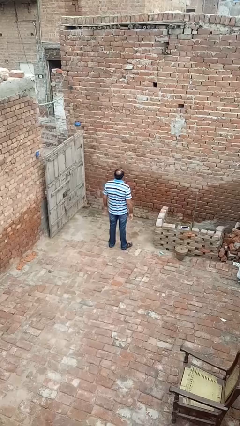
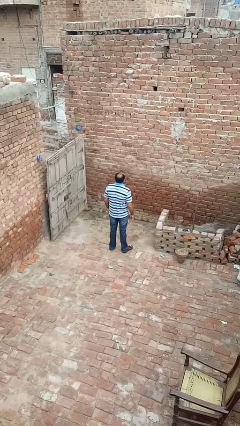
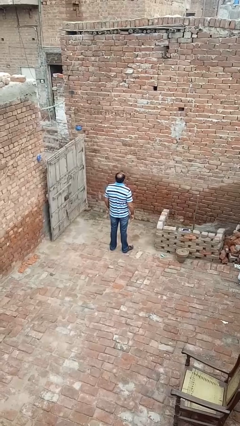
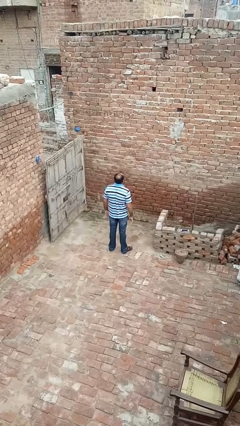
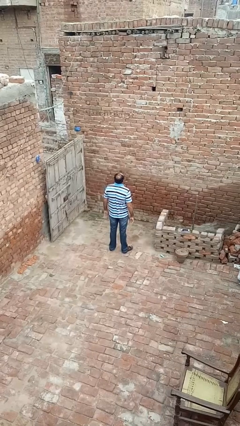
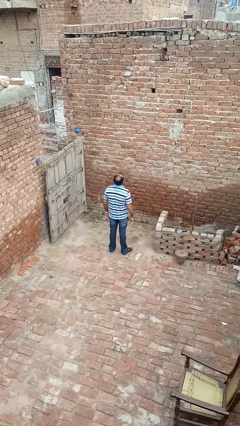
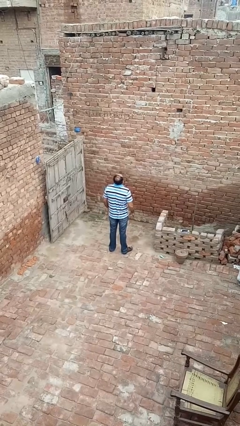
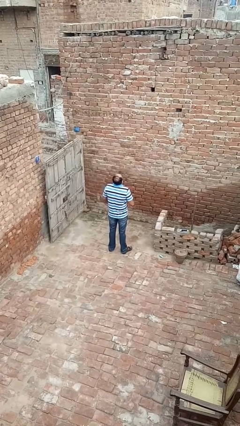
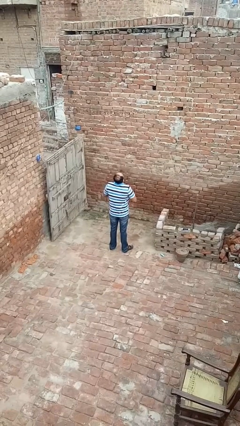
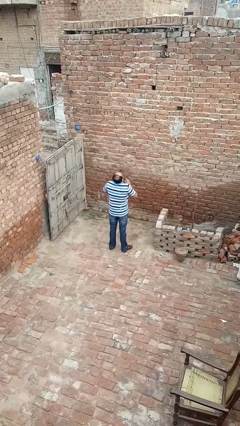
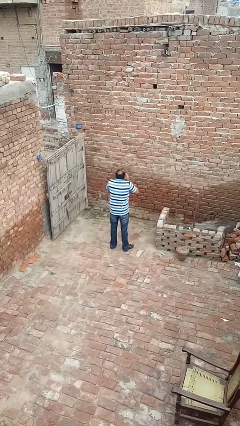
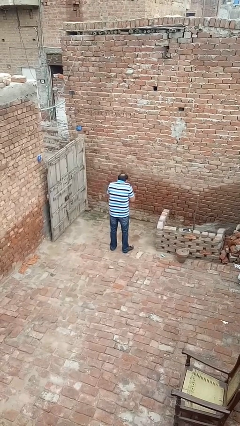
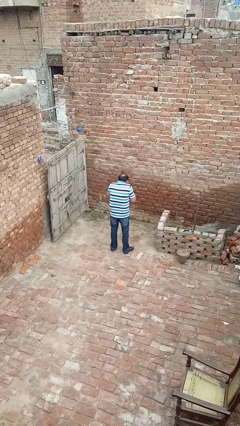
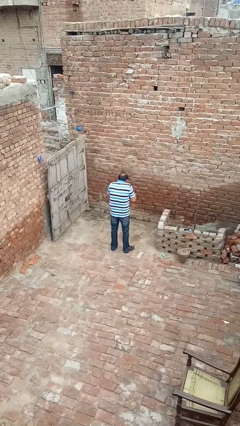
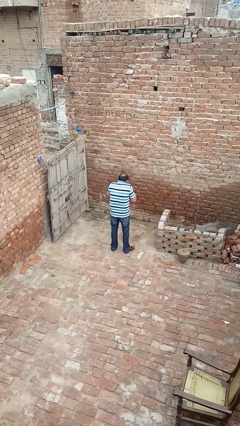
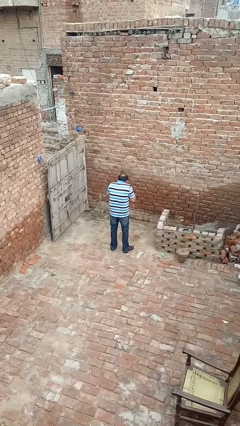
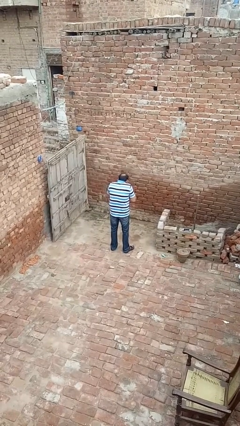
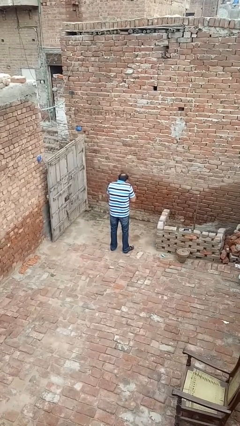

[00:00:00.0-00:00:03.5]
person sneezes into hand

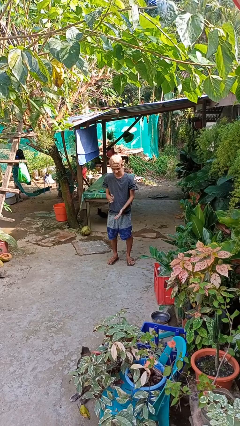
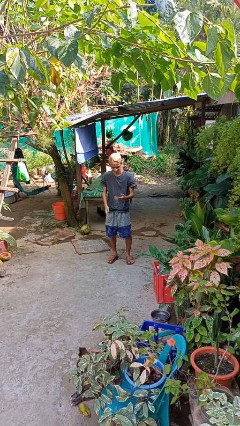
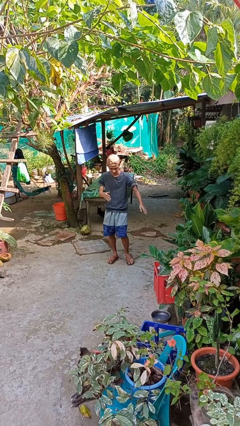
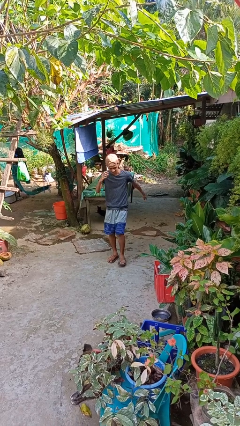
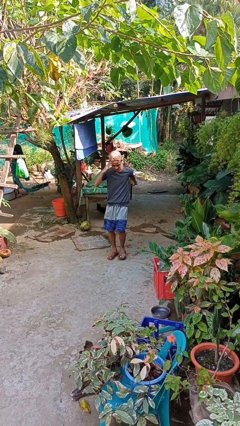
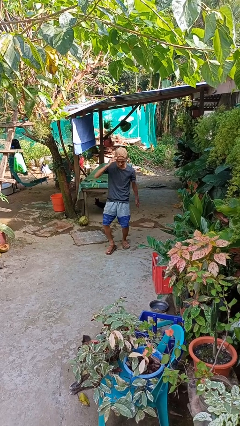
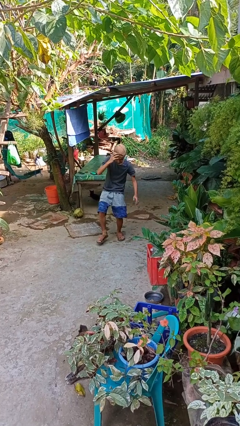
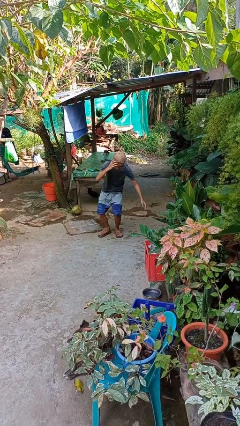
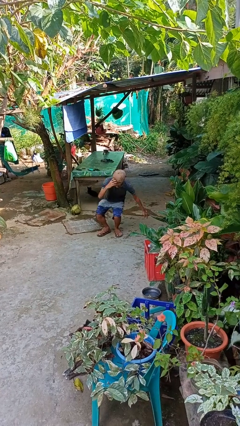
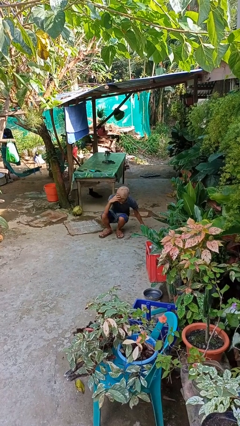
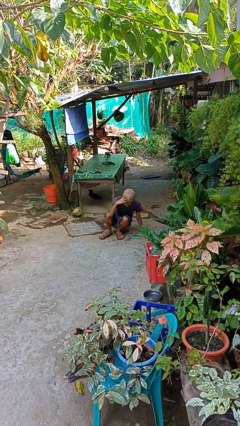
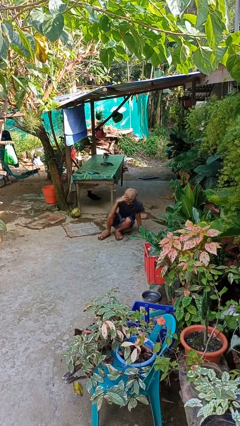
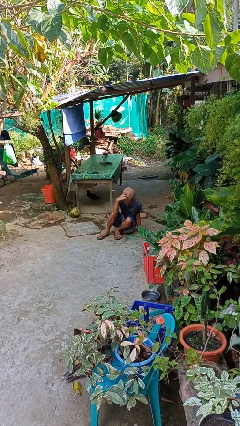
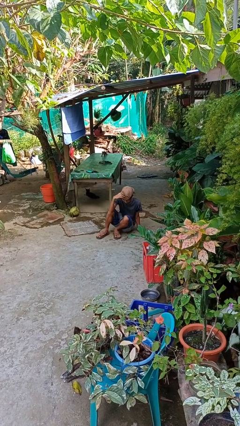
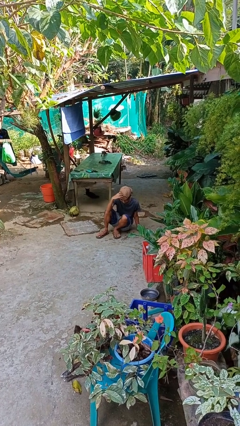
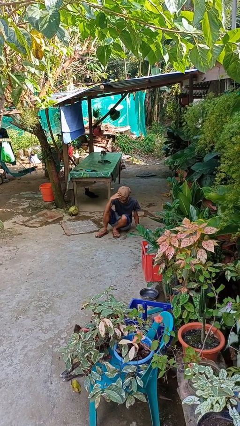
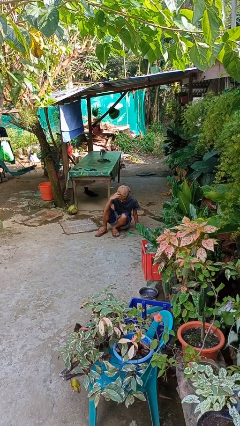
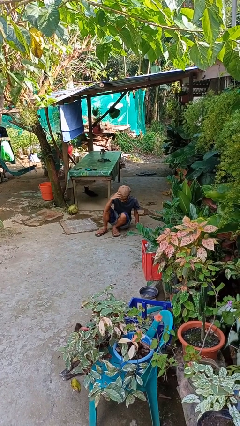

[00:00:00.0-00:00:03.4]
person falls while standing

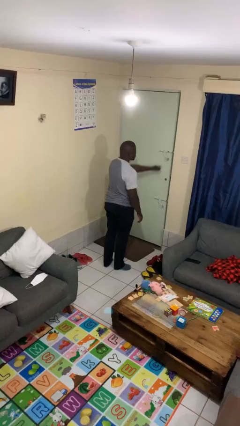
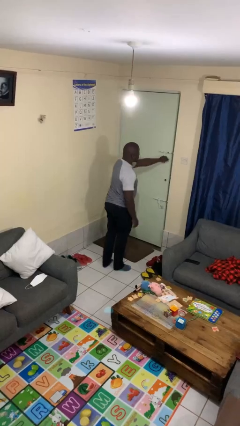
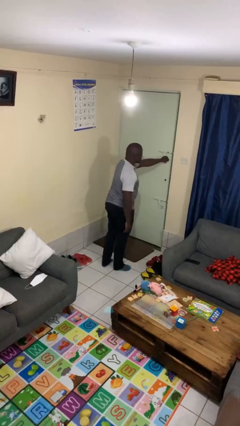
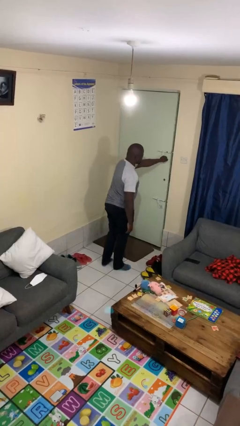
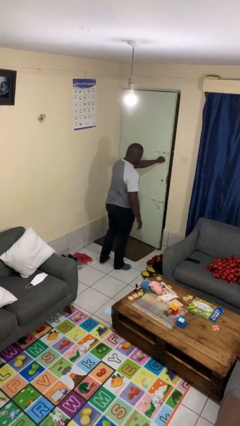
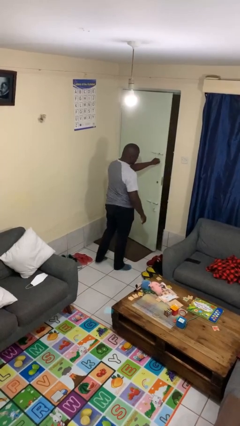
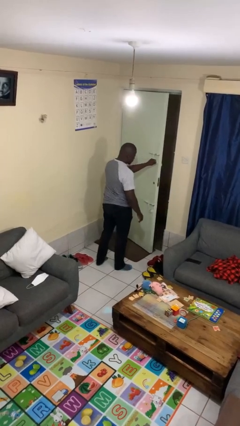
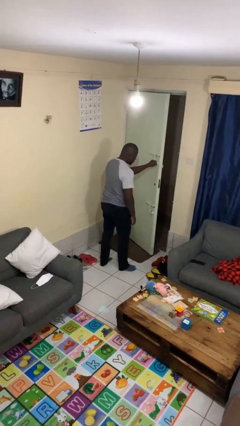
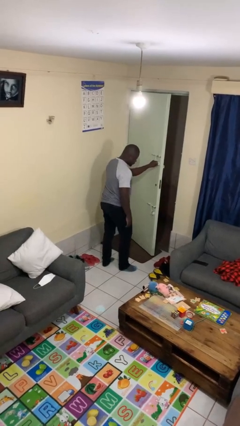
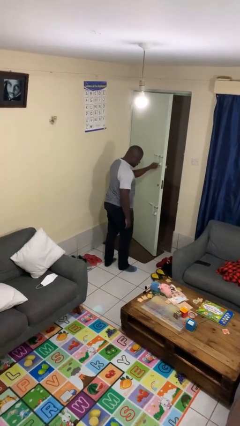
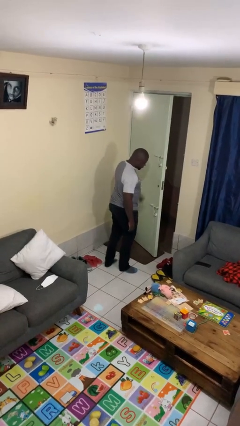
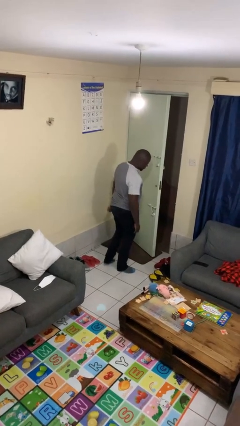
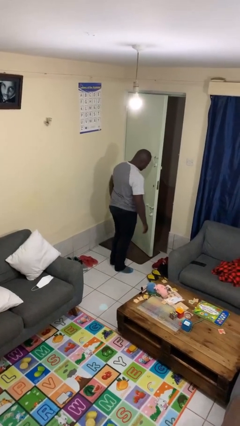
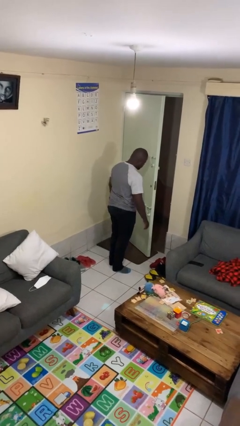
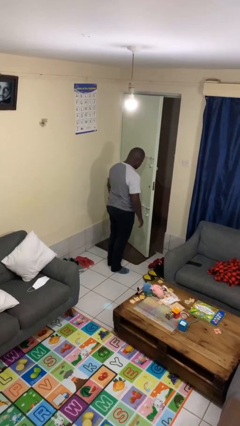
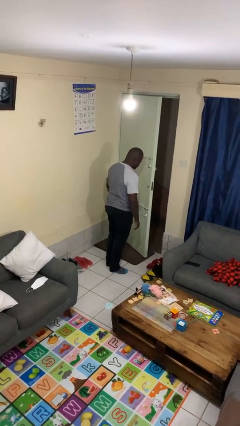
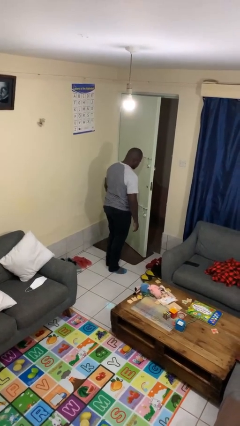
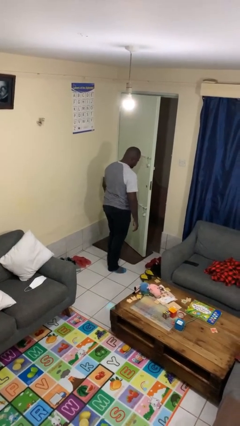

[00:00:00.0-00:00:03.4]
person opens facility door

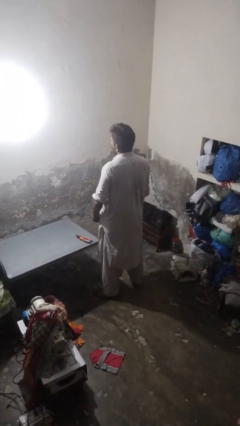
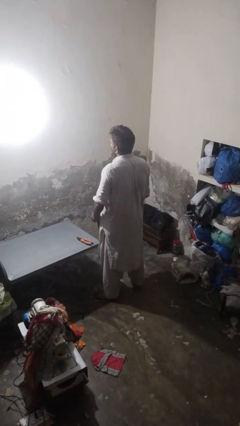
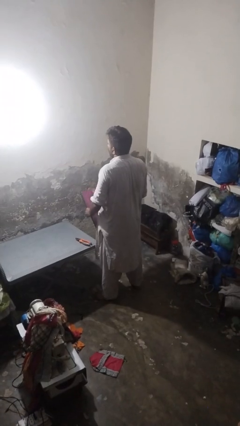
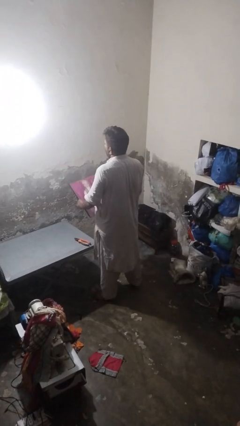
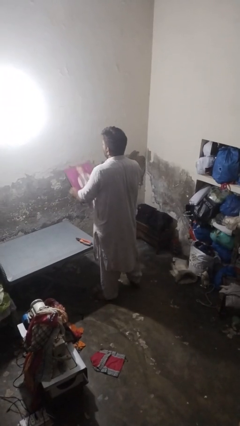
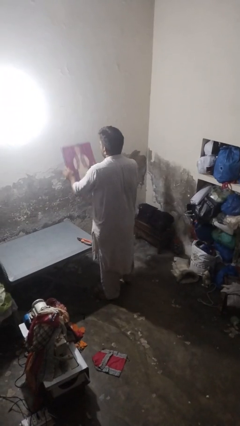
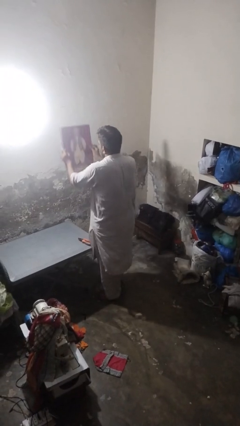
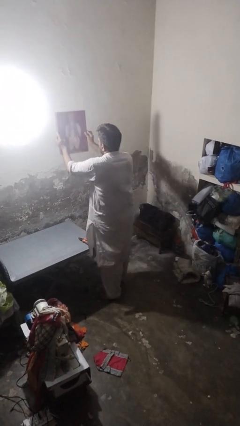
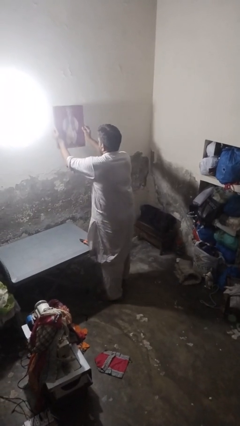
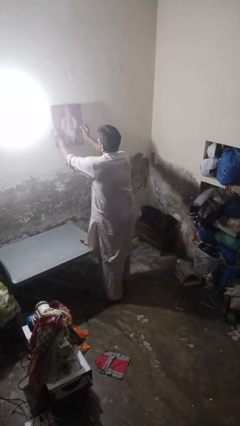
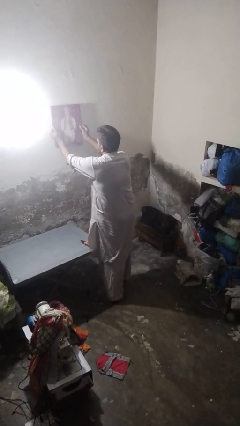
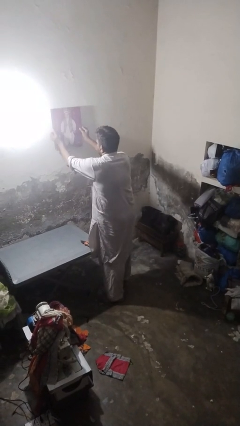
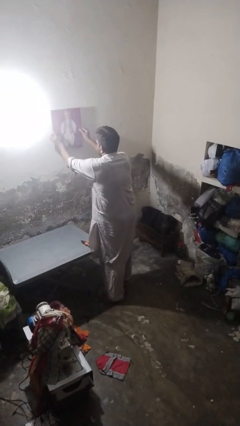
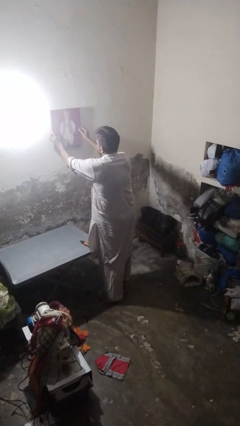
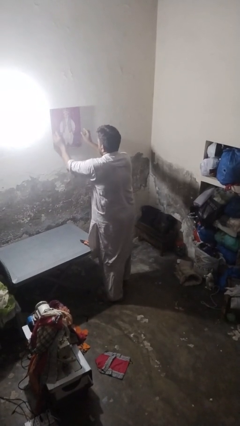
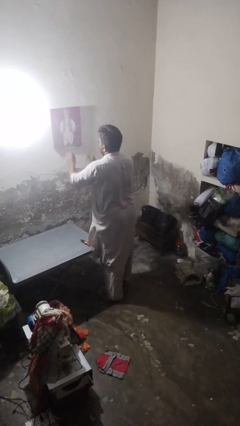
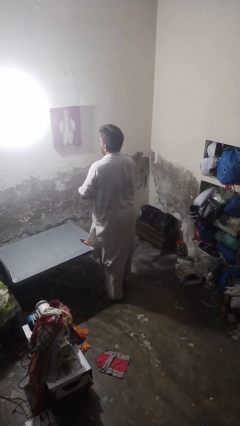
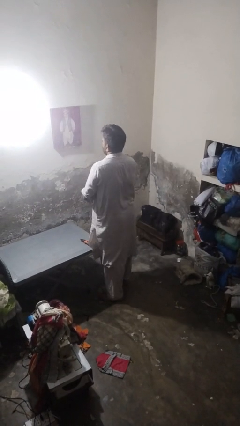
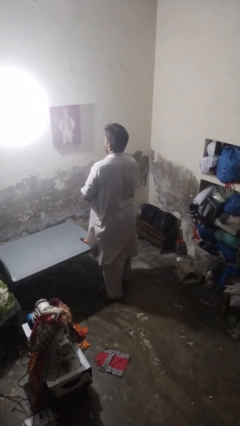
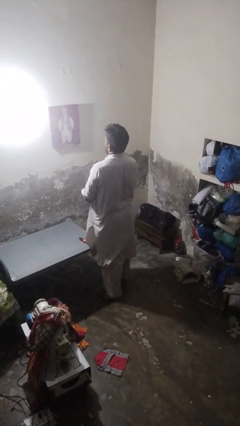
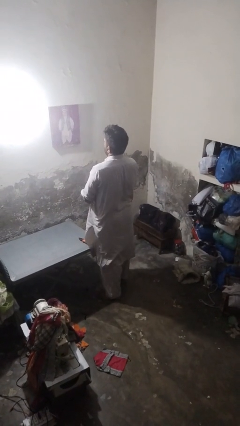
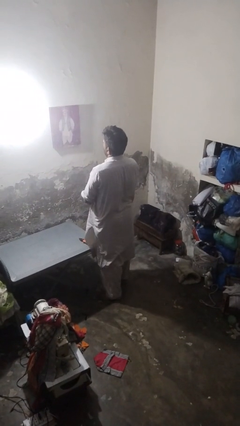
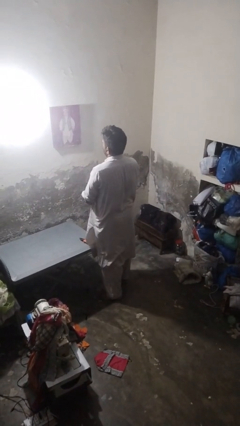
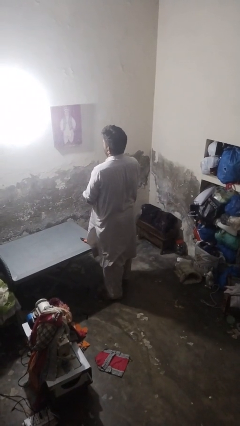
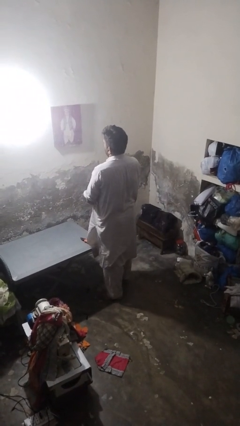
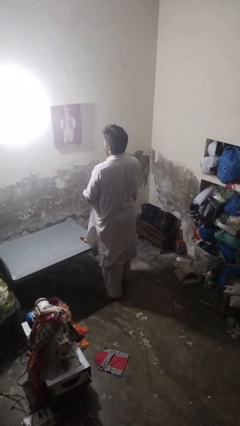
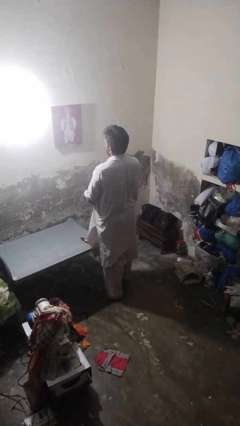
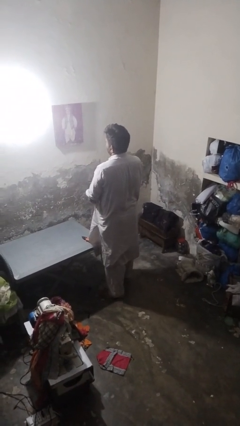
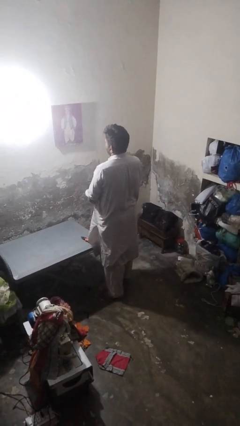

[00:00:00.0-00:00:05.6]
person puts up picture frame

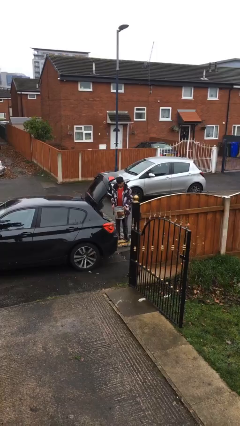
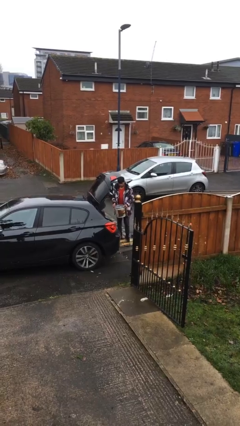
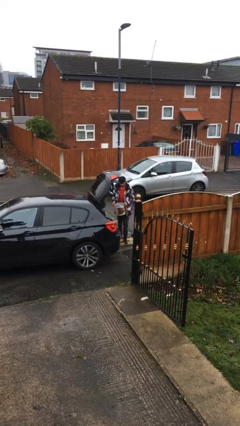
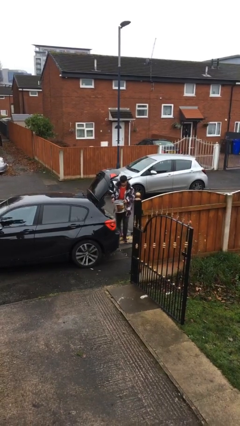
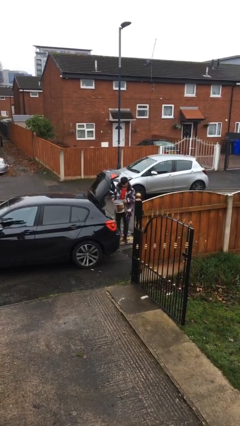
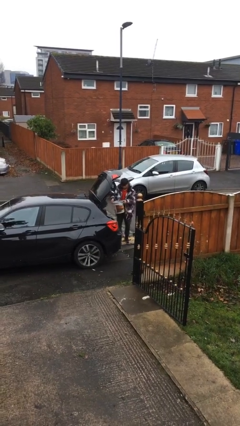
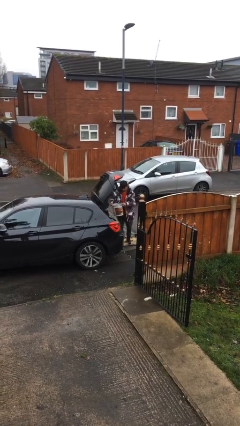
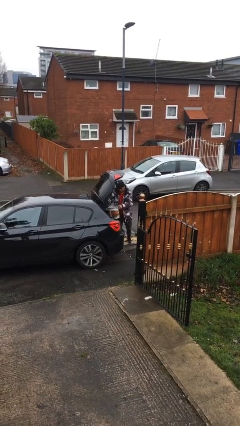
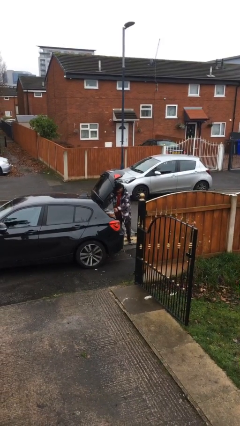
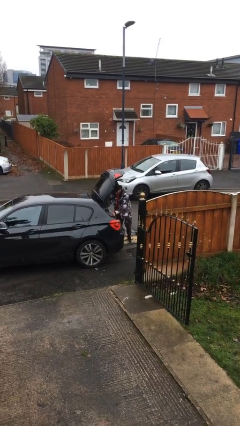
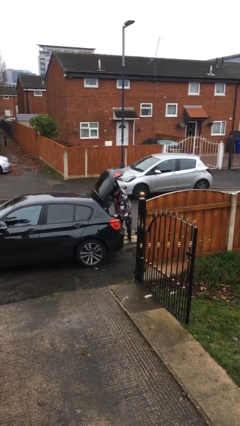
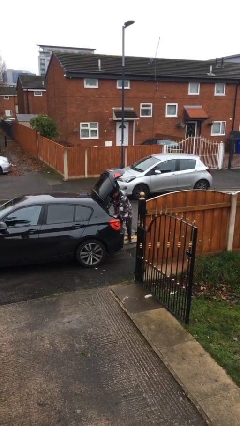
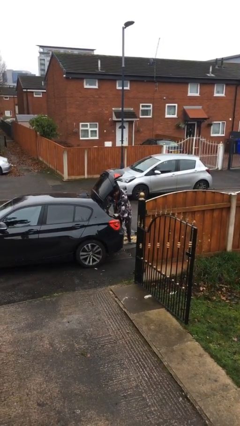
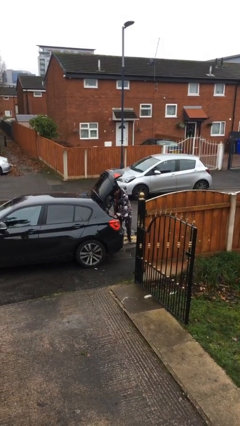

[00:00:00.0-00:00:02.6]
person loads car
